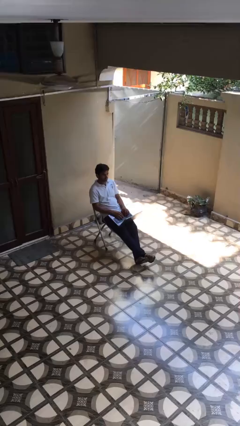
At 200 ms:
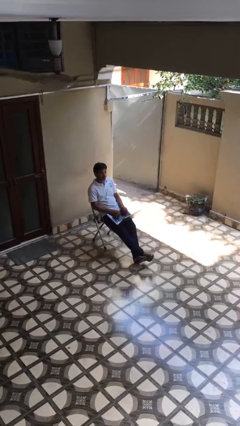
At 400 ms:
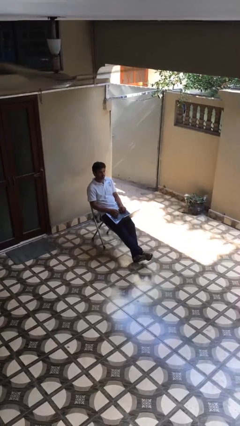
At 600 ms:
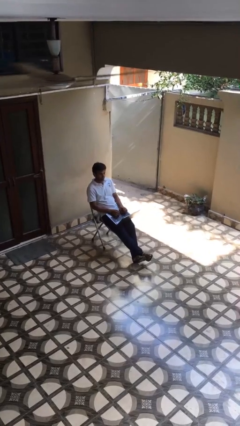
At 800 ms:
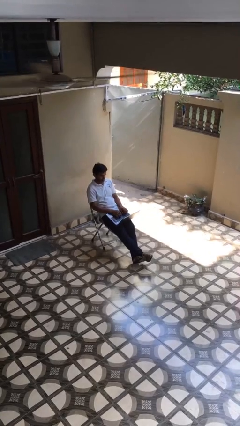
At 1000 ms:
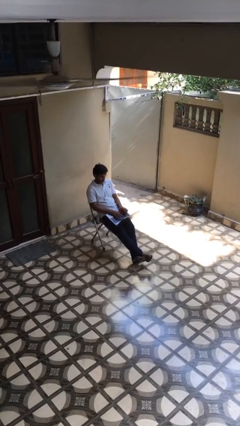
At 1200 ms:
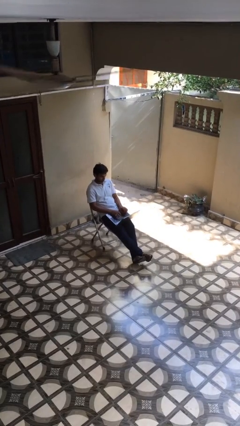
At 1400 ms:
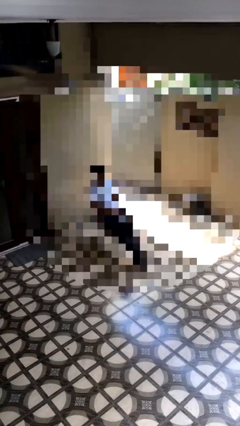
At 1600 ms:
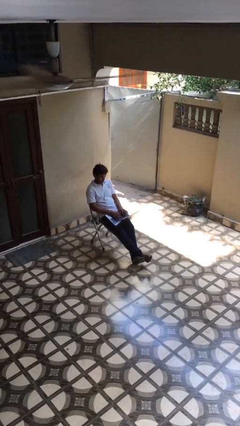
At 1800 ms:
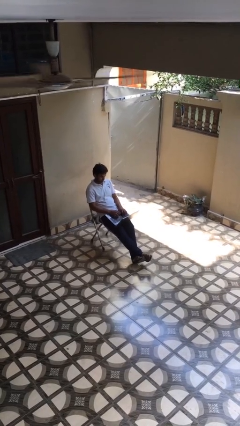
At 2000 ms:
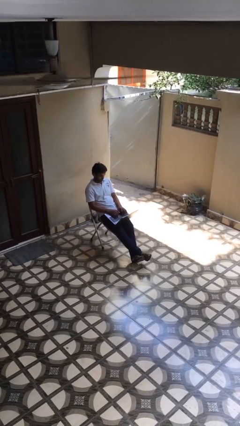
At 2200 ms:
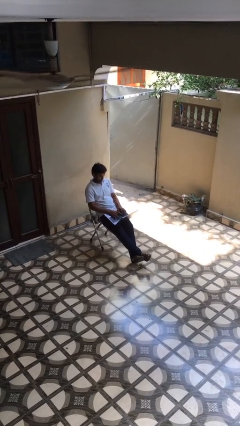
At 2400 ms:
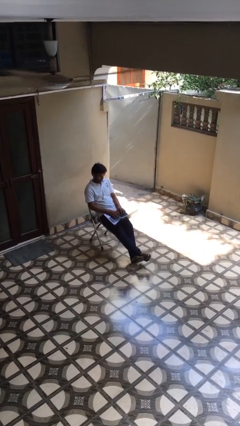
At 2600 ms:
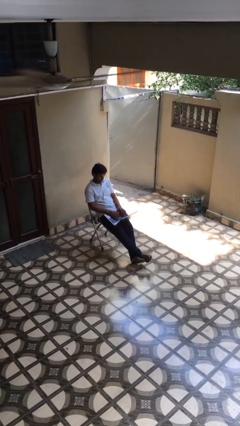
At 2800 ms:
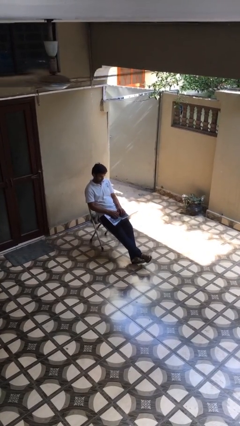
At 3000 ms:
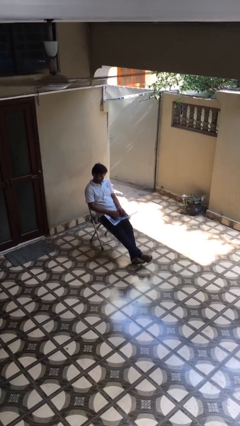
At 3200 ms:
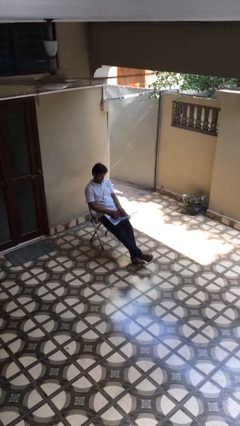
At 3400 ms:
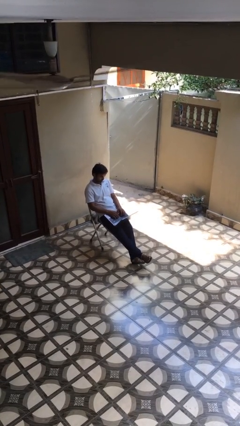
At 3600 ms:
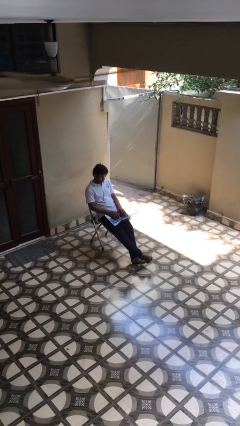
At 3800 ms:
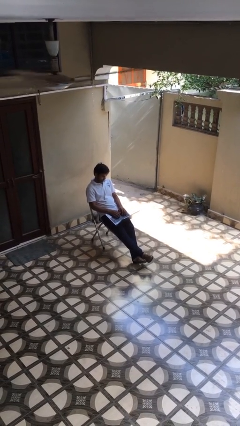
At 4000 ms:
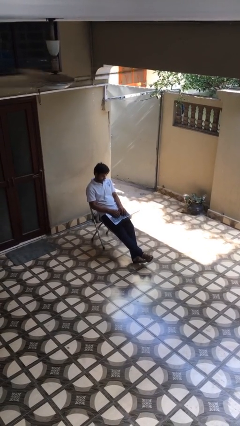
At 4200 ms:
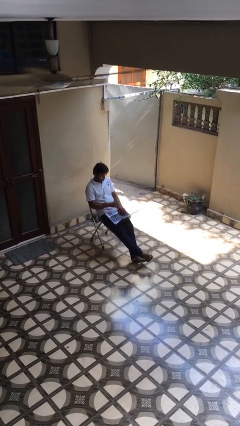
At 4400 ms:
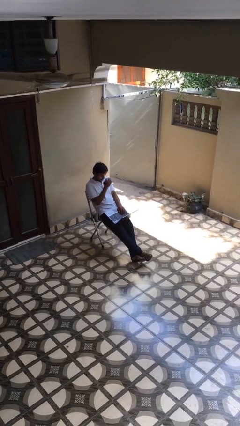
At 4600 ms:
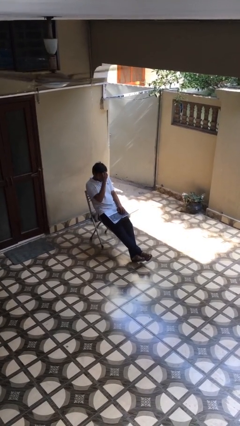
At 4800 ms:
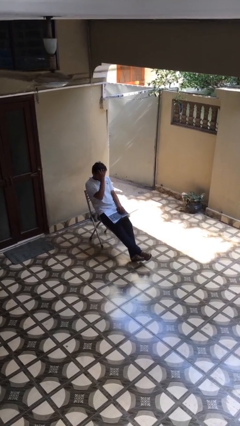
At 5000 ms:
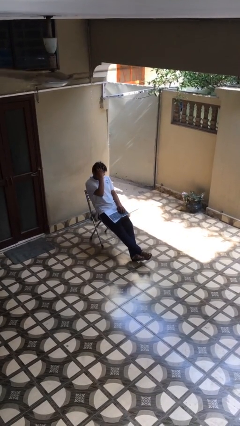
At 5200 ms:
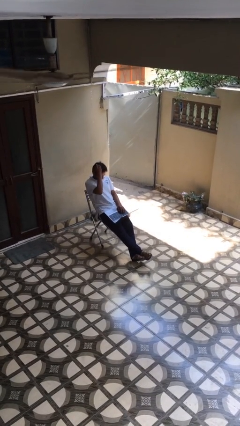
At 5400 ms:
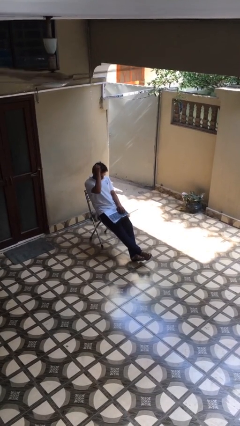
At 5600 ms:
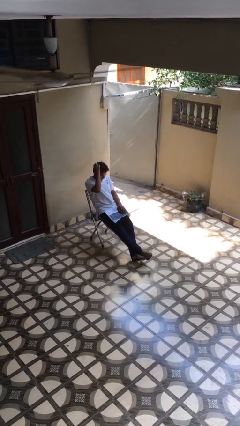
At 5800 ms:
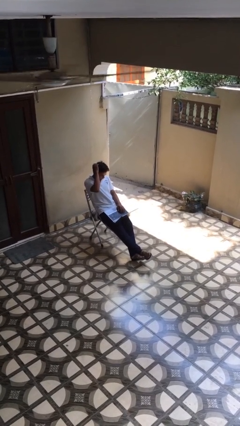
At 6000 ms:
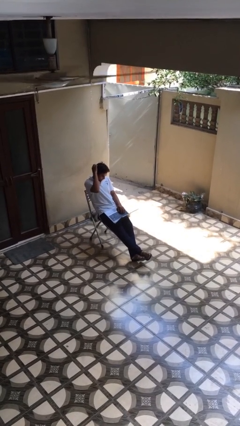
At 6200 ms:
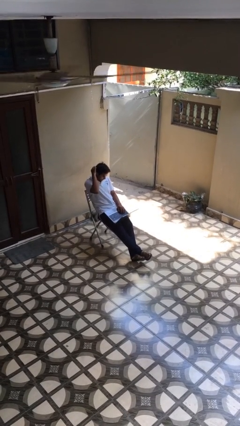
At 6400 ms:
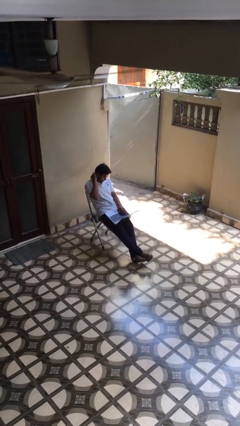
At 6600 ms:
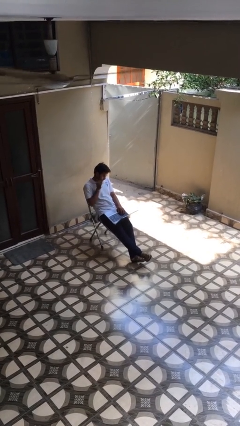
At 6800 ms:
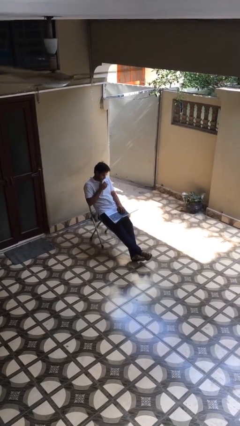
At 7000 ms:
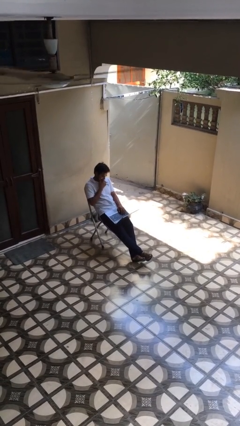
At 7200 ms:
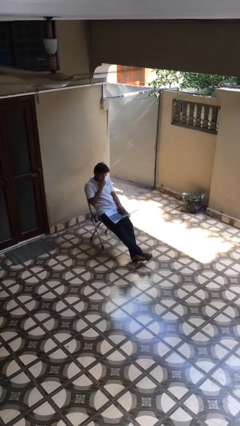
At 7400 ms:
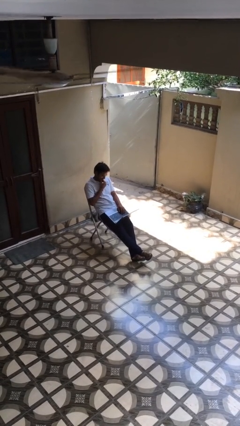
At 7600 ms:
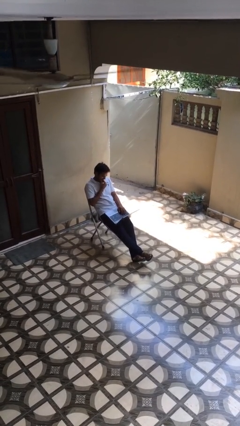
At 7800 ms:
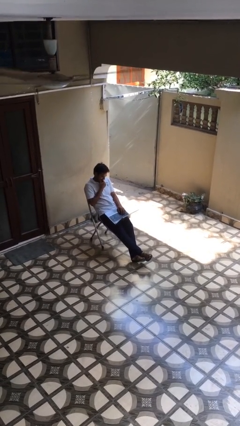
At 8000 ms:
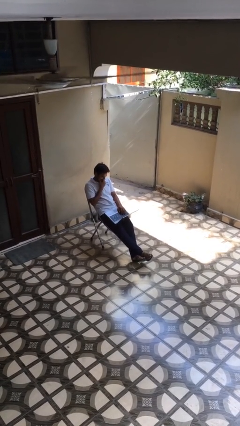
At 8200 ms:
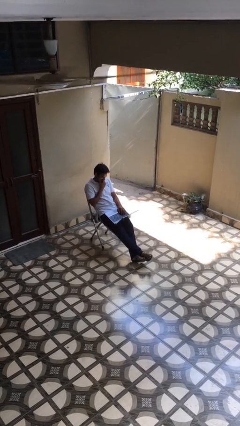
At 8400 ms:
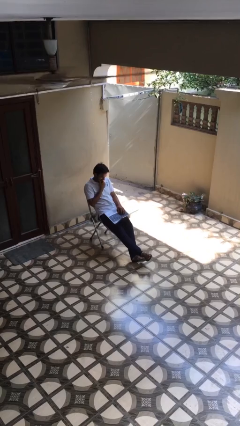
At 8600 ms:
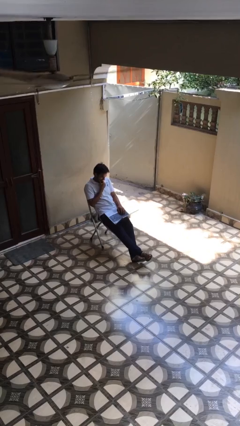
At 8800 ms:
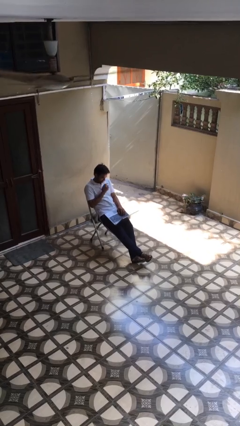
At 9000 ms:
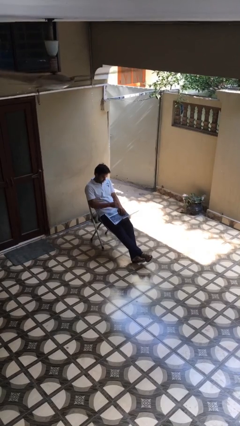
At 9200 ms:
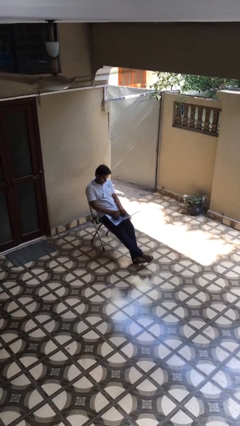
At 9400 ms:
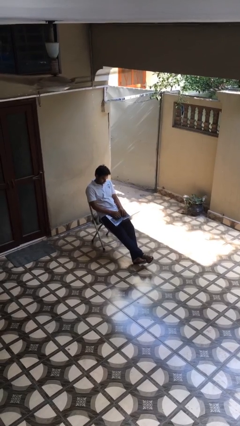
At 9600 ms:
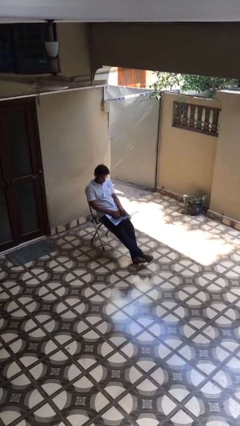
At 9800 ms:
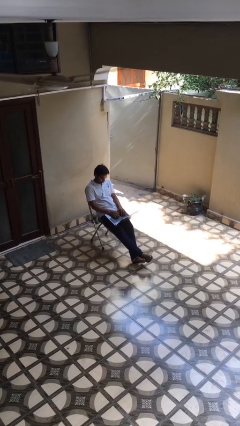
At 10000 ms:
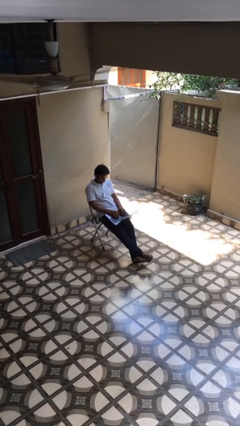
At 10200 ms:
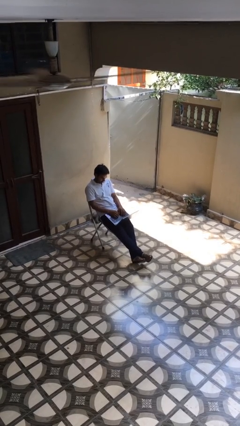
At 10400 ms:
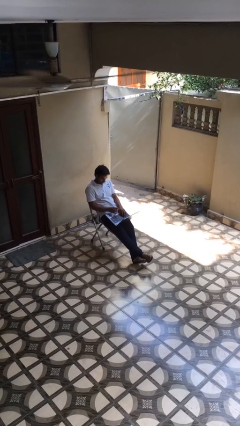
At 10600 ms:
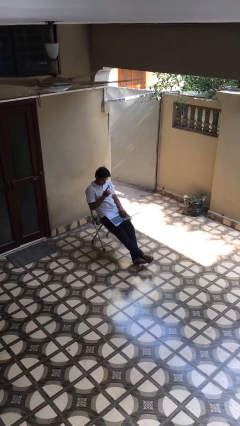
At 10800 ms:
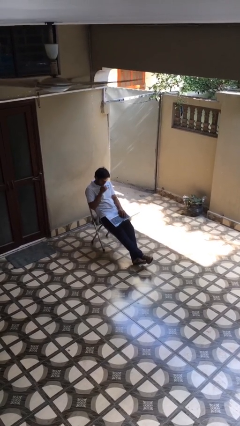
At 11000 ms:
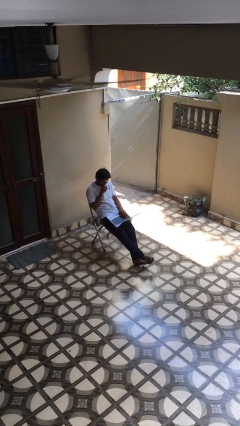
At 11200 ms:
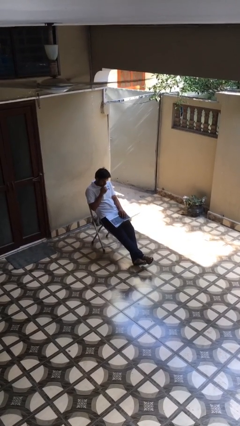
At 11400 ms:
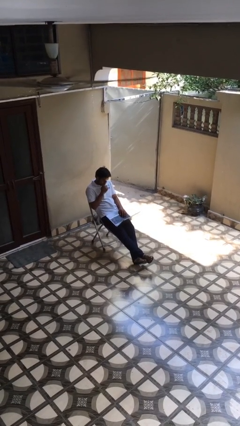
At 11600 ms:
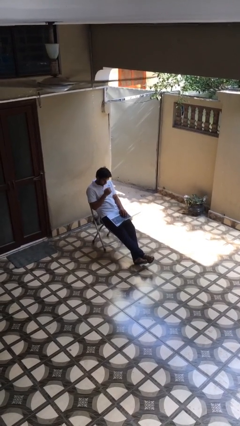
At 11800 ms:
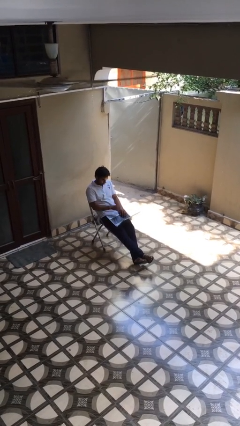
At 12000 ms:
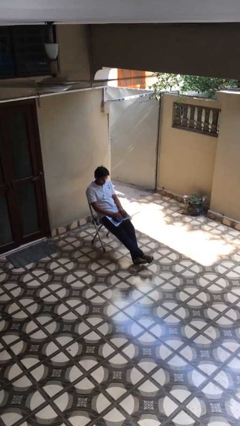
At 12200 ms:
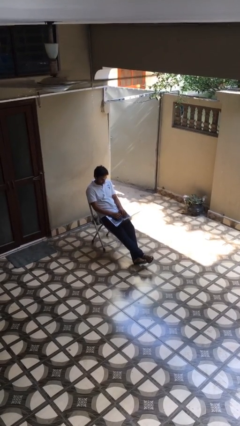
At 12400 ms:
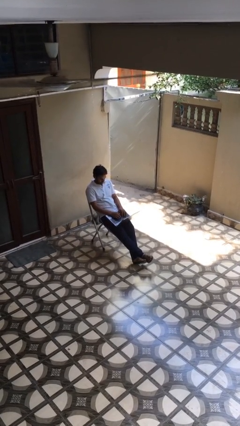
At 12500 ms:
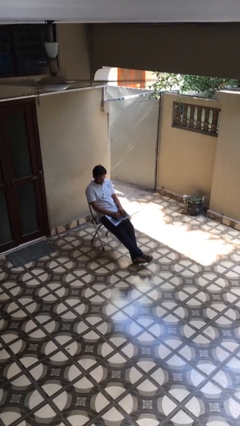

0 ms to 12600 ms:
person interacts with laptop

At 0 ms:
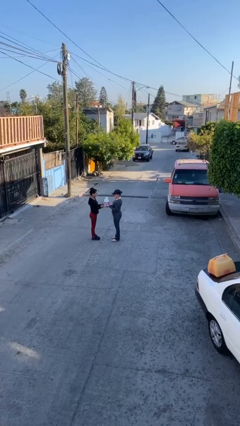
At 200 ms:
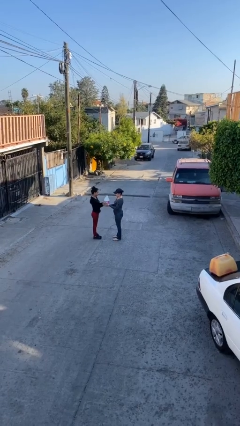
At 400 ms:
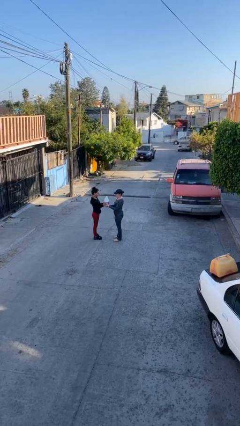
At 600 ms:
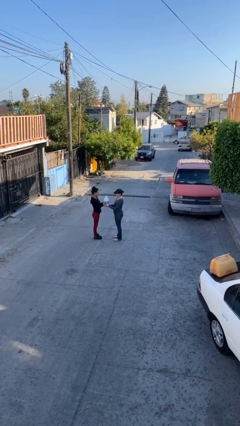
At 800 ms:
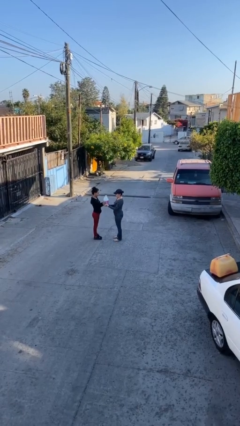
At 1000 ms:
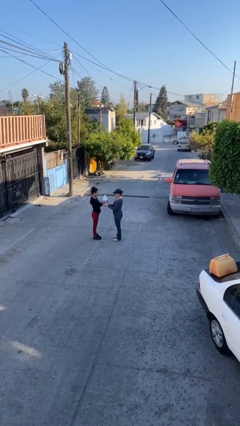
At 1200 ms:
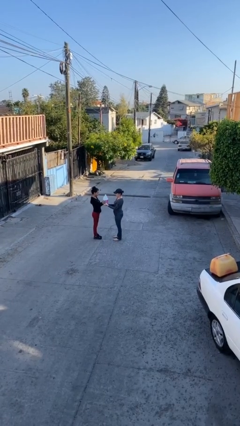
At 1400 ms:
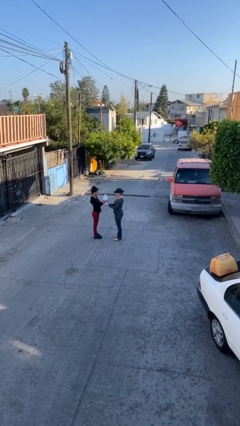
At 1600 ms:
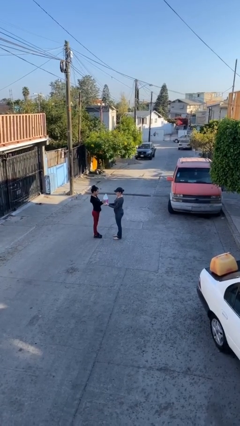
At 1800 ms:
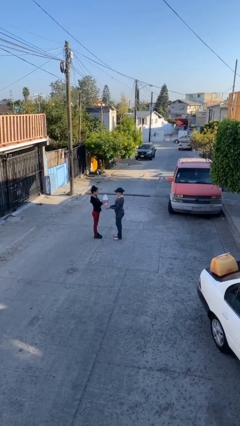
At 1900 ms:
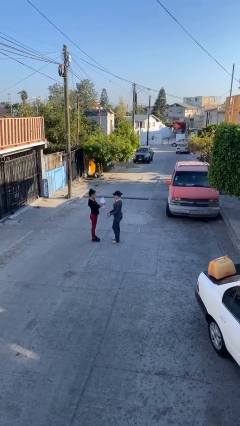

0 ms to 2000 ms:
person transfers object to person

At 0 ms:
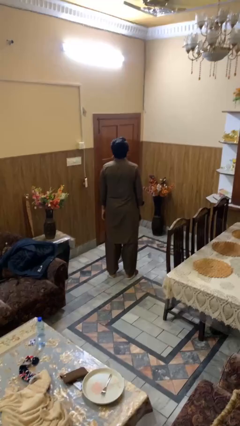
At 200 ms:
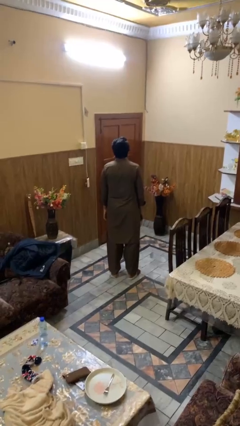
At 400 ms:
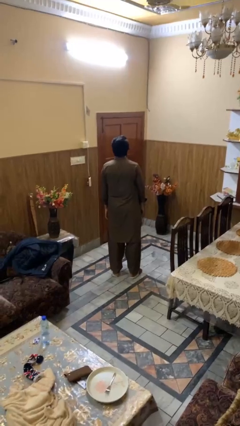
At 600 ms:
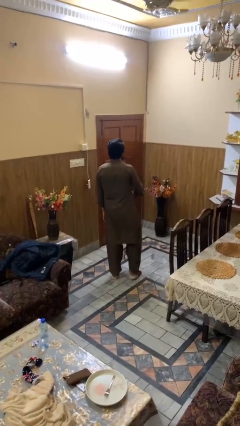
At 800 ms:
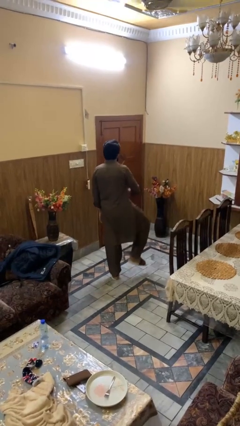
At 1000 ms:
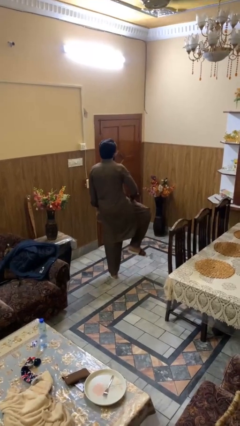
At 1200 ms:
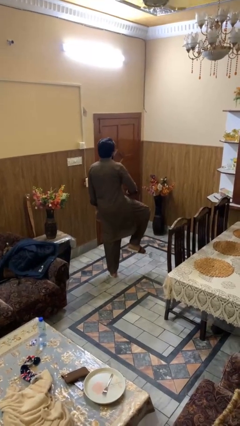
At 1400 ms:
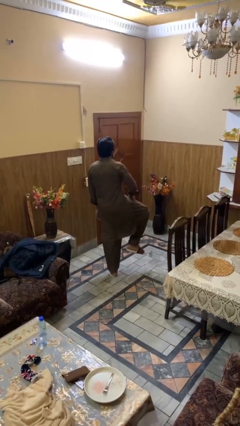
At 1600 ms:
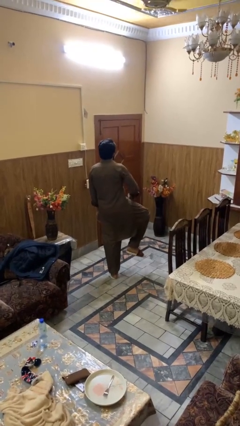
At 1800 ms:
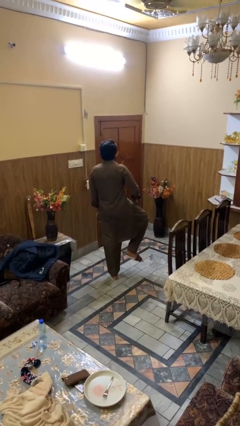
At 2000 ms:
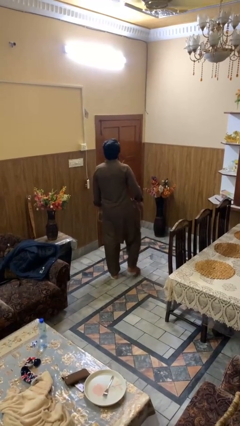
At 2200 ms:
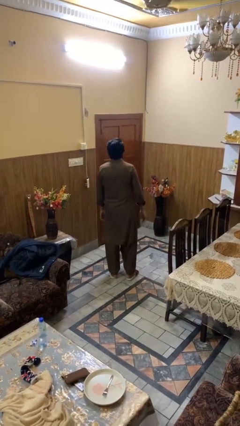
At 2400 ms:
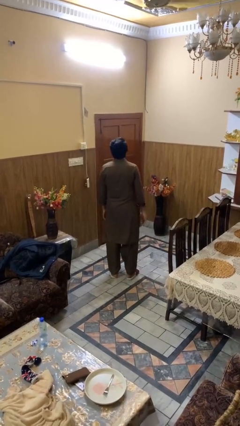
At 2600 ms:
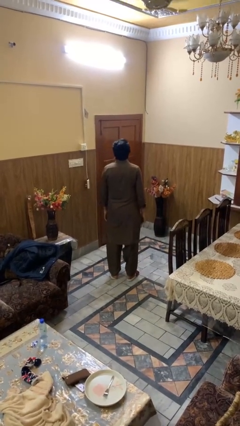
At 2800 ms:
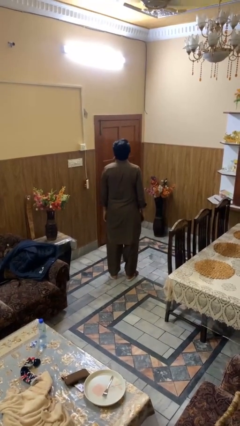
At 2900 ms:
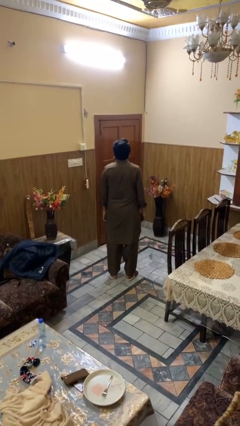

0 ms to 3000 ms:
person slaps hands on thighs
